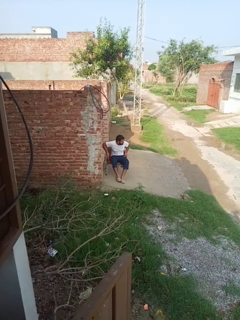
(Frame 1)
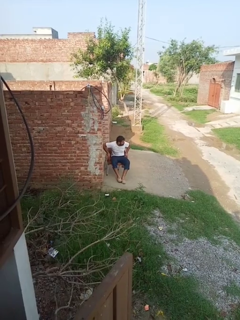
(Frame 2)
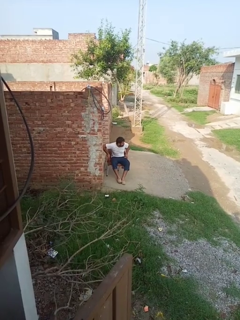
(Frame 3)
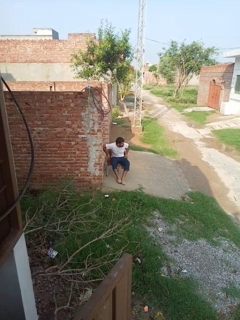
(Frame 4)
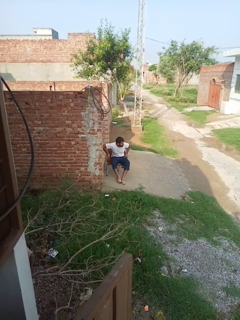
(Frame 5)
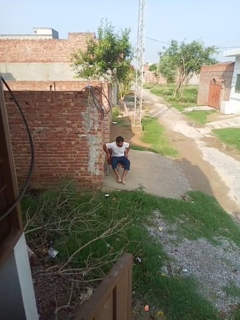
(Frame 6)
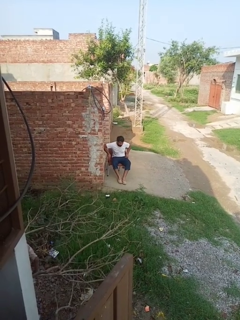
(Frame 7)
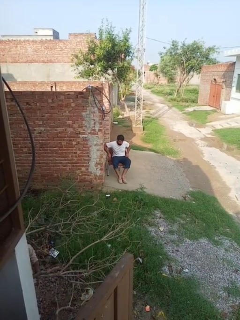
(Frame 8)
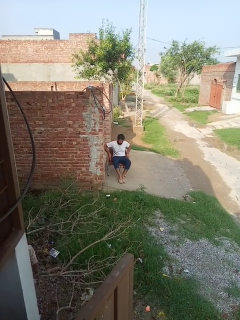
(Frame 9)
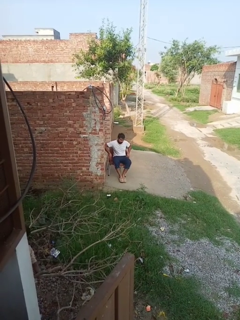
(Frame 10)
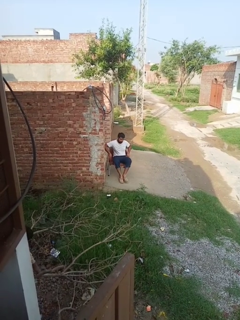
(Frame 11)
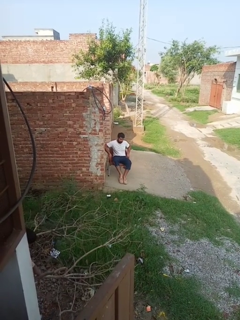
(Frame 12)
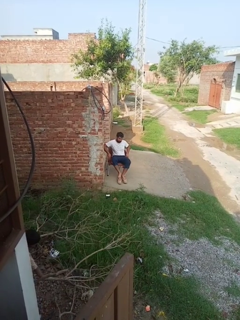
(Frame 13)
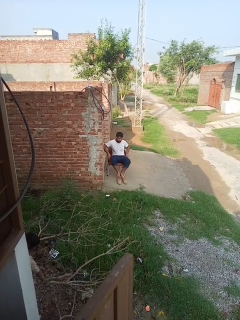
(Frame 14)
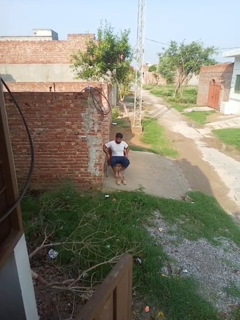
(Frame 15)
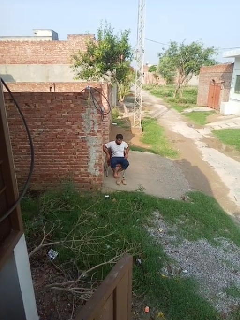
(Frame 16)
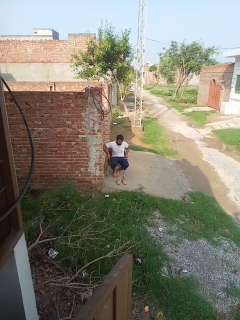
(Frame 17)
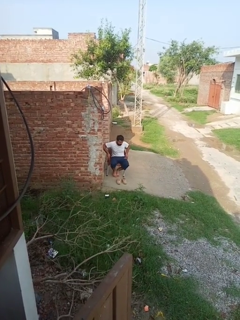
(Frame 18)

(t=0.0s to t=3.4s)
person takes off shoes

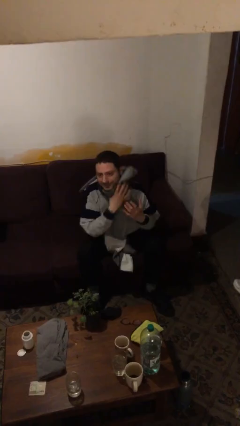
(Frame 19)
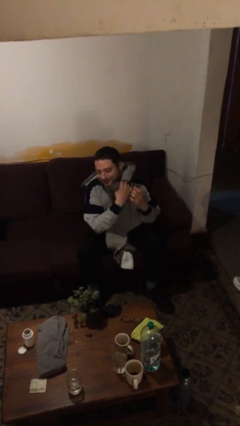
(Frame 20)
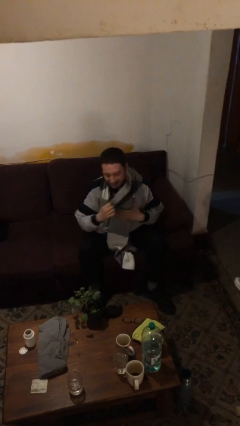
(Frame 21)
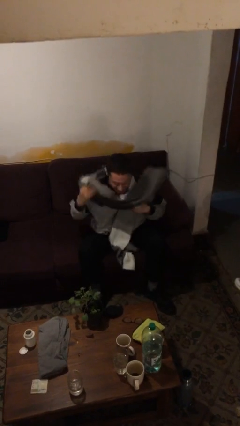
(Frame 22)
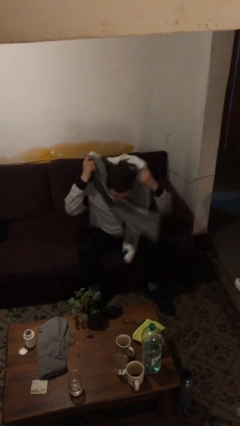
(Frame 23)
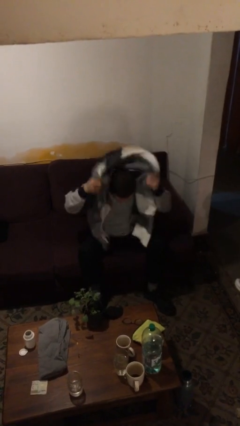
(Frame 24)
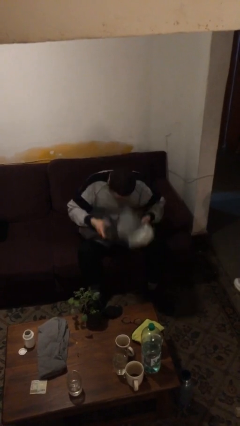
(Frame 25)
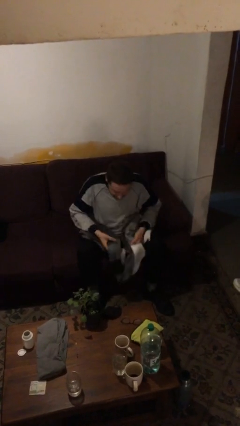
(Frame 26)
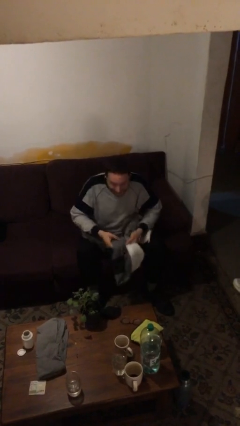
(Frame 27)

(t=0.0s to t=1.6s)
person takes off scarf

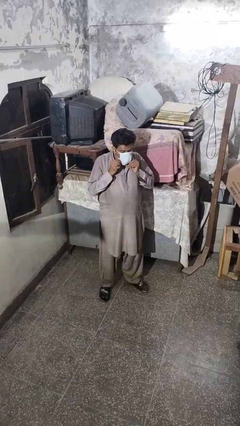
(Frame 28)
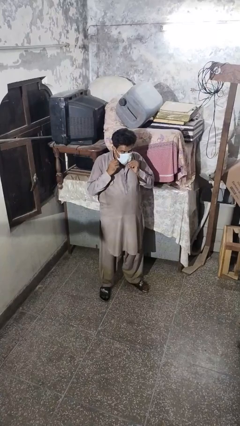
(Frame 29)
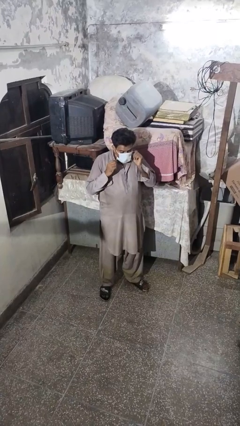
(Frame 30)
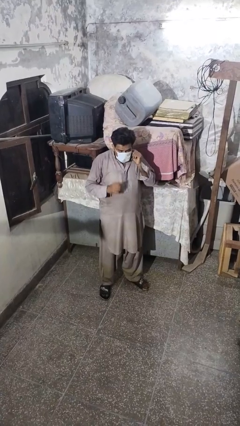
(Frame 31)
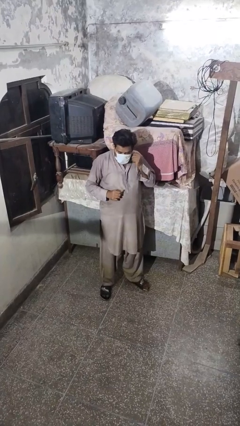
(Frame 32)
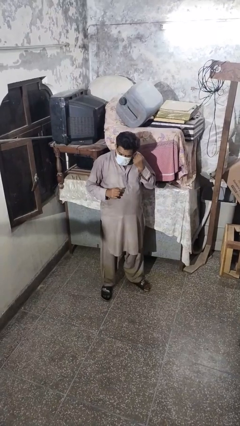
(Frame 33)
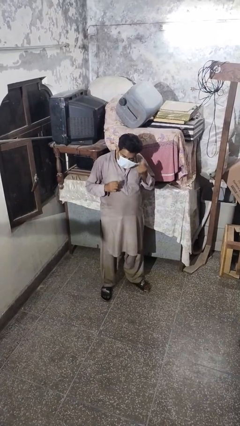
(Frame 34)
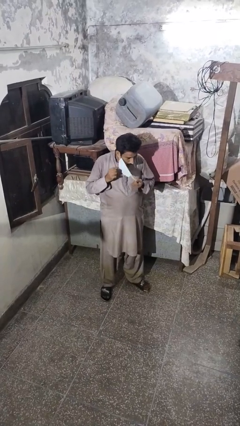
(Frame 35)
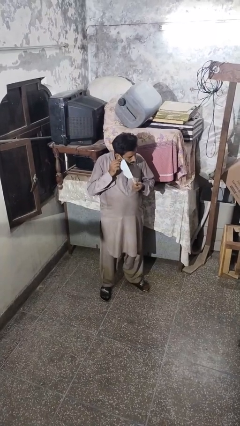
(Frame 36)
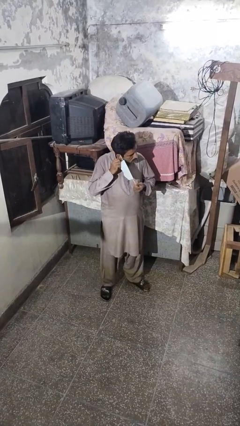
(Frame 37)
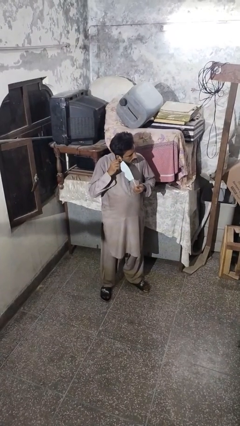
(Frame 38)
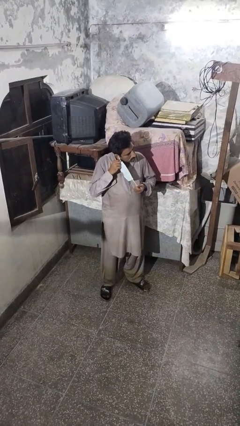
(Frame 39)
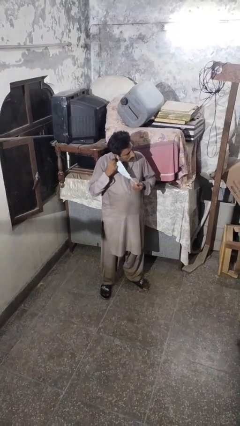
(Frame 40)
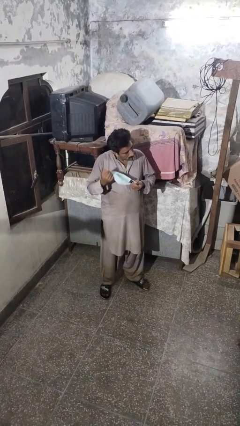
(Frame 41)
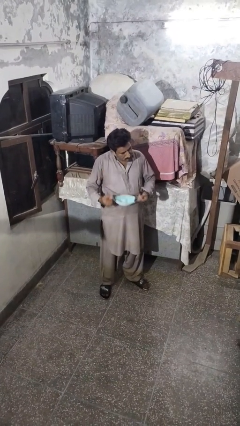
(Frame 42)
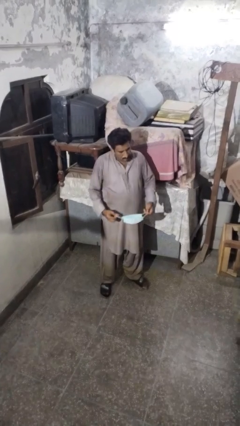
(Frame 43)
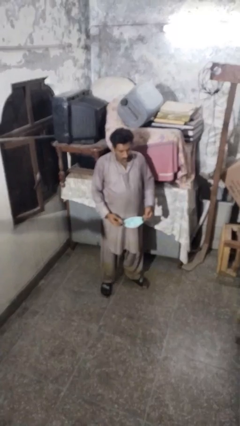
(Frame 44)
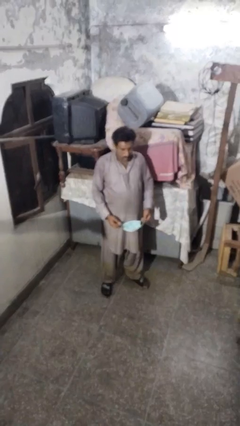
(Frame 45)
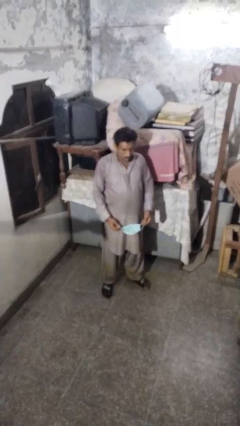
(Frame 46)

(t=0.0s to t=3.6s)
person takes off facemask

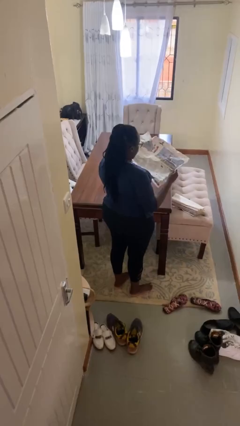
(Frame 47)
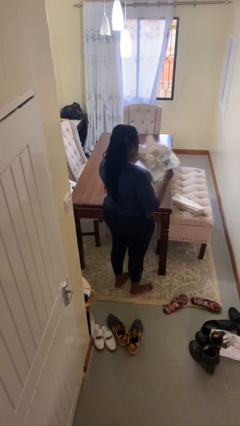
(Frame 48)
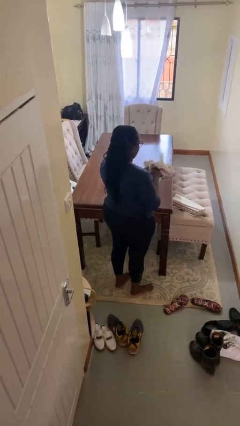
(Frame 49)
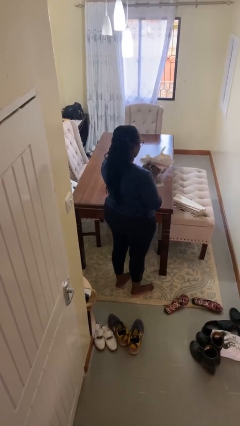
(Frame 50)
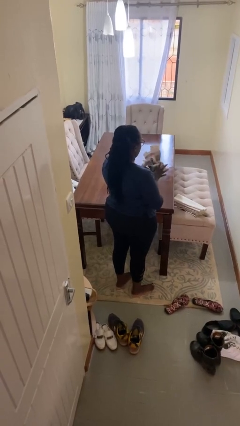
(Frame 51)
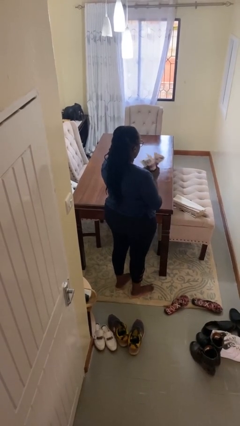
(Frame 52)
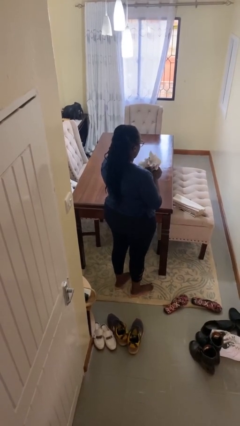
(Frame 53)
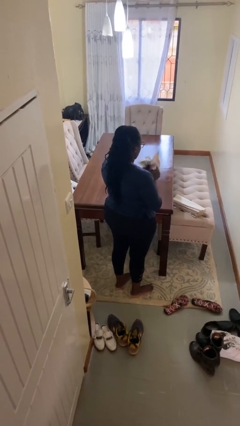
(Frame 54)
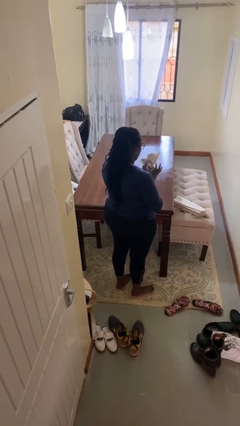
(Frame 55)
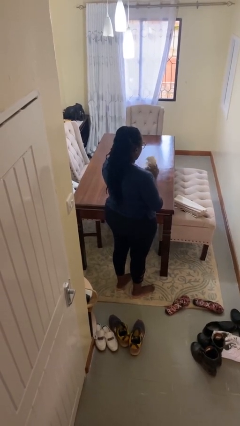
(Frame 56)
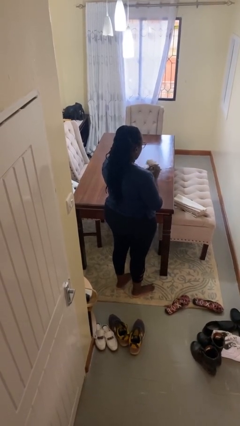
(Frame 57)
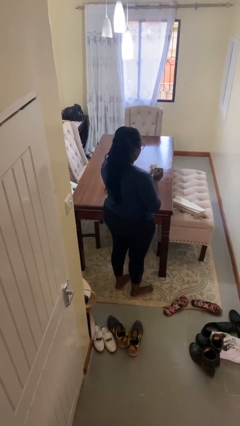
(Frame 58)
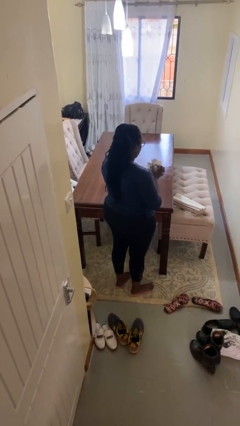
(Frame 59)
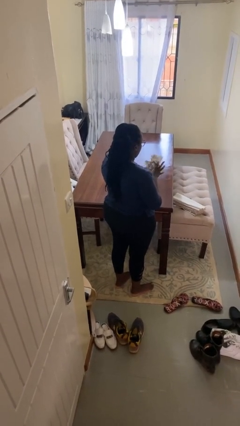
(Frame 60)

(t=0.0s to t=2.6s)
person crumples paper

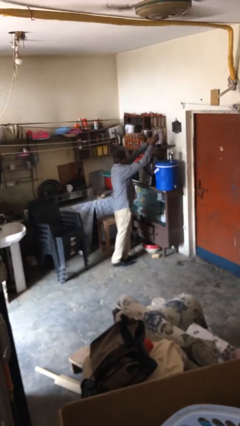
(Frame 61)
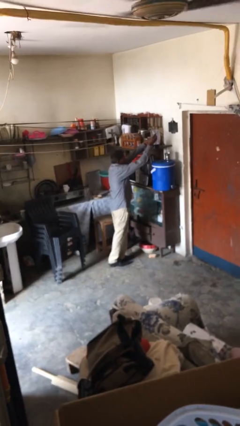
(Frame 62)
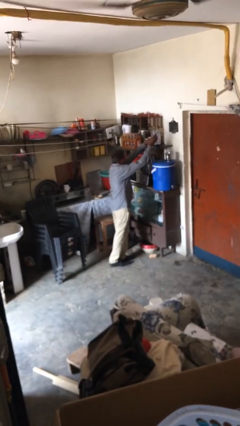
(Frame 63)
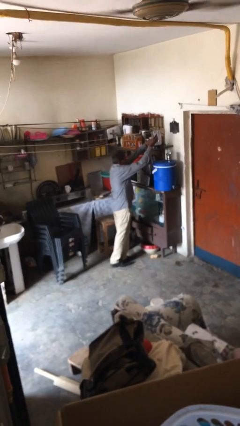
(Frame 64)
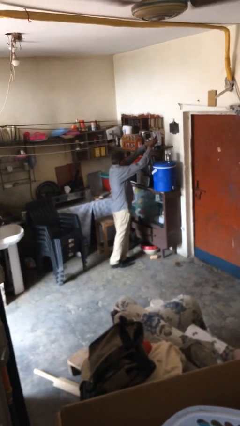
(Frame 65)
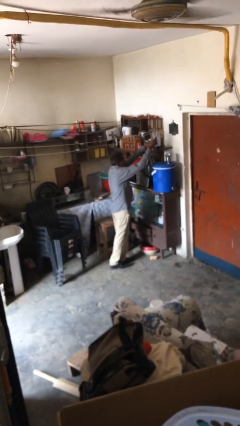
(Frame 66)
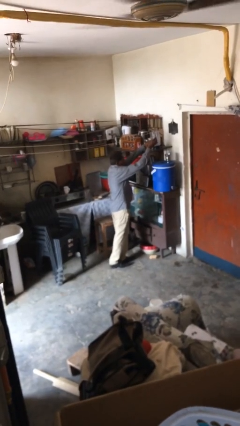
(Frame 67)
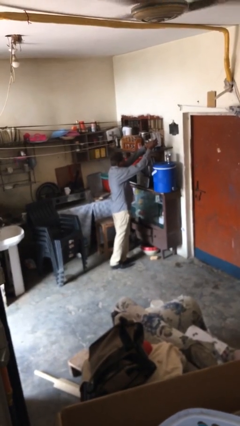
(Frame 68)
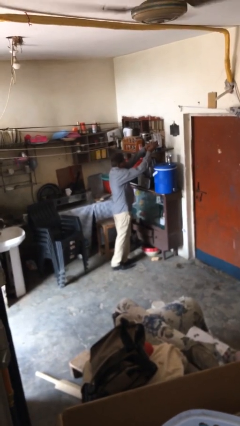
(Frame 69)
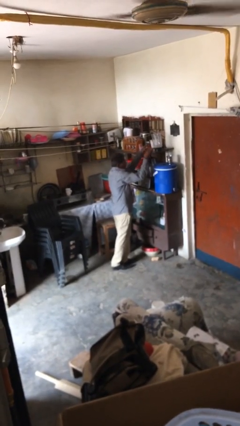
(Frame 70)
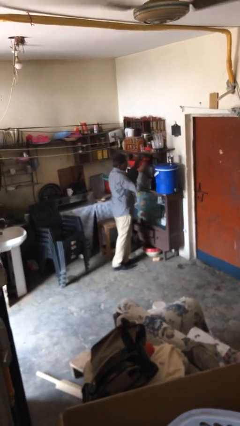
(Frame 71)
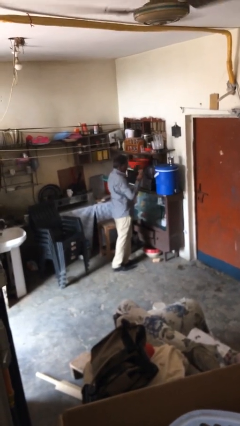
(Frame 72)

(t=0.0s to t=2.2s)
person puts down object on shelf

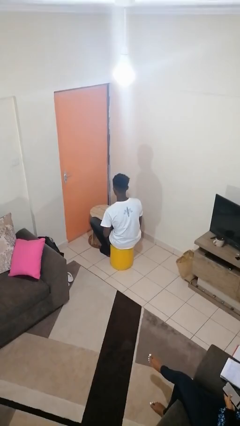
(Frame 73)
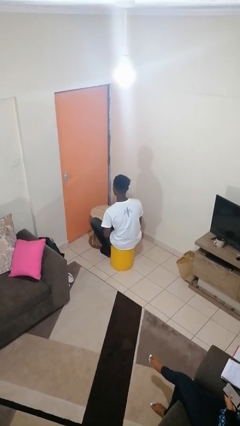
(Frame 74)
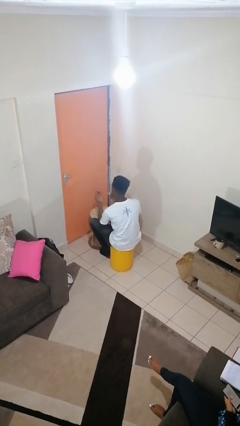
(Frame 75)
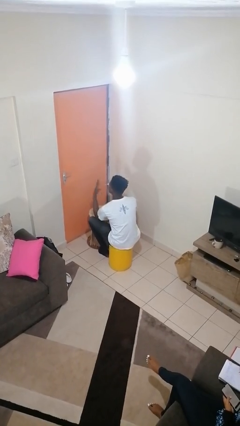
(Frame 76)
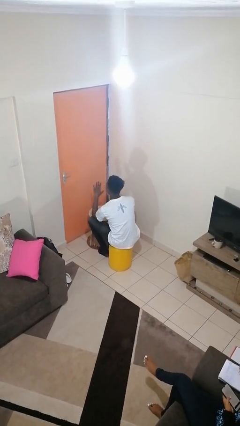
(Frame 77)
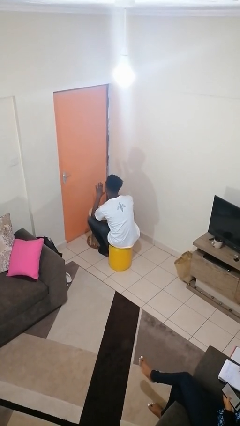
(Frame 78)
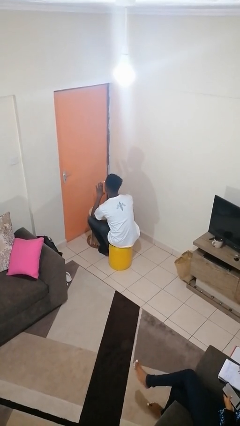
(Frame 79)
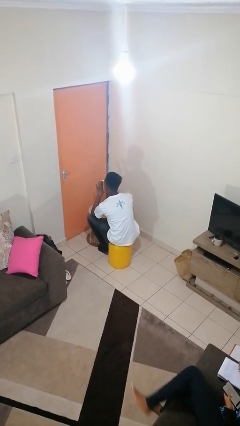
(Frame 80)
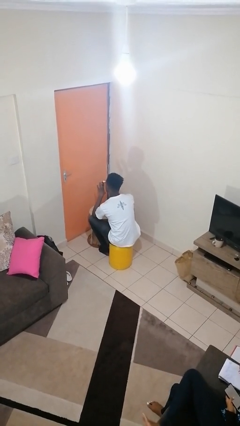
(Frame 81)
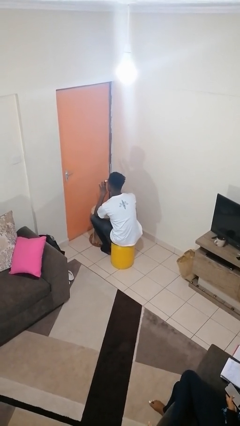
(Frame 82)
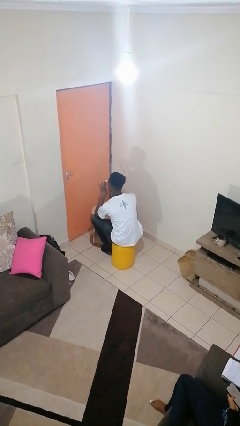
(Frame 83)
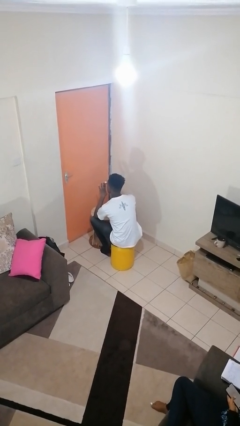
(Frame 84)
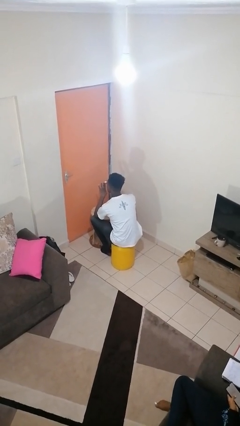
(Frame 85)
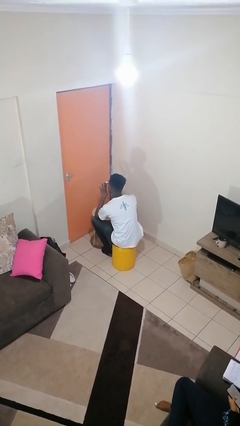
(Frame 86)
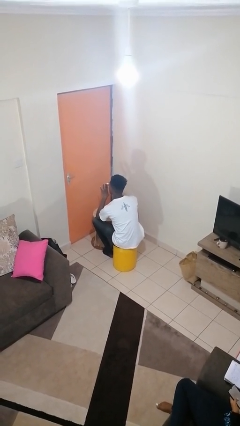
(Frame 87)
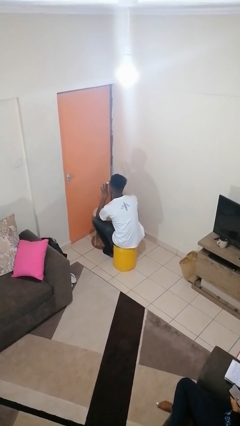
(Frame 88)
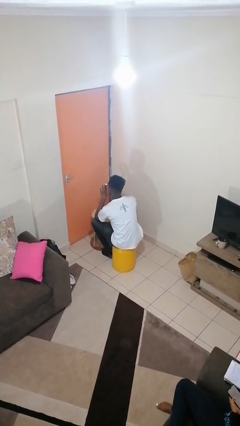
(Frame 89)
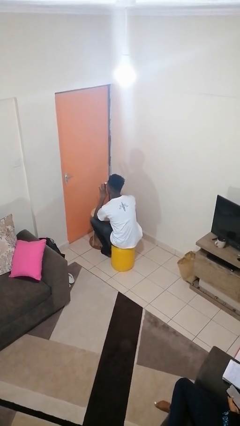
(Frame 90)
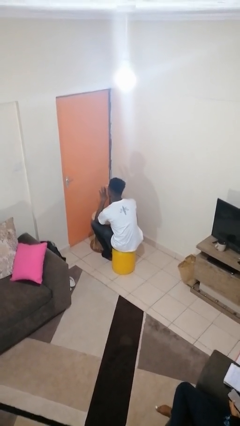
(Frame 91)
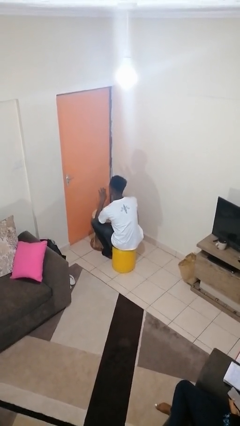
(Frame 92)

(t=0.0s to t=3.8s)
person paints fingernails

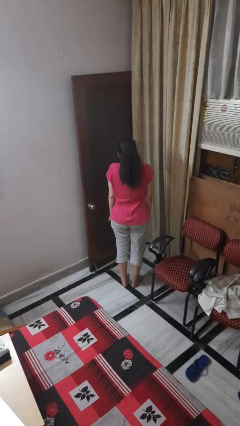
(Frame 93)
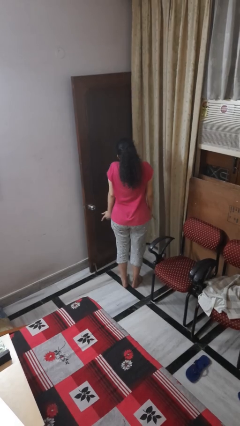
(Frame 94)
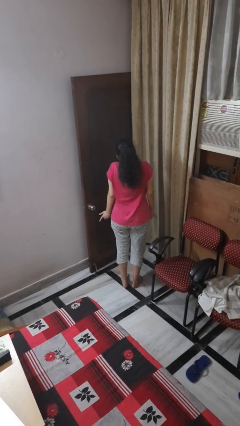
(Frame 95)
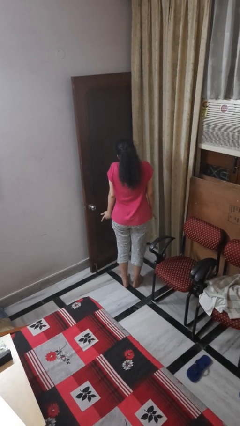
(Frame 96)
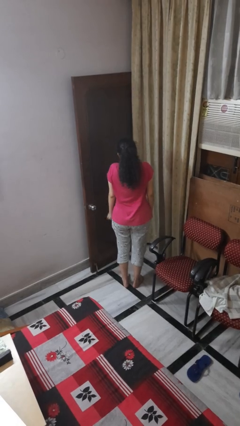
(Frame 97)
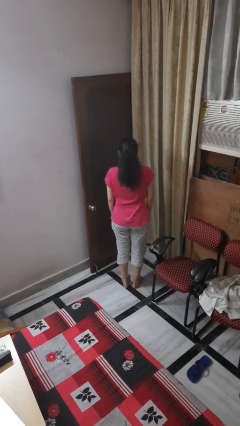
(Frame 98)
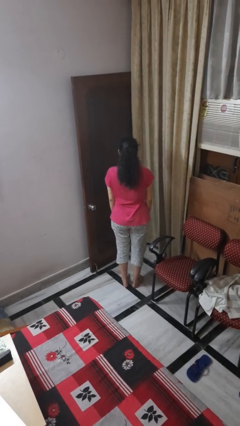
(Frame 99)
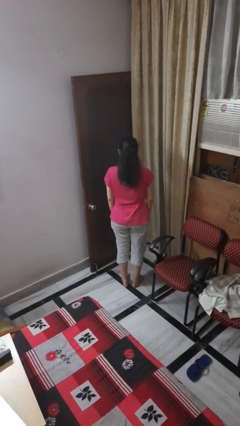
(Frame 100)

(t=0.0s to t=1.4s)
person shrugs
